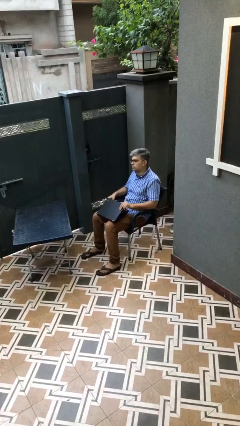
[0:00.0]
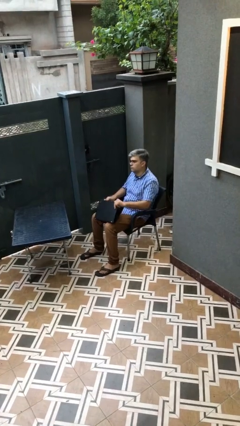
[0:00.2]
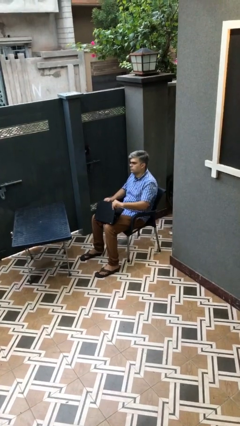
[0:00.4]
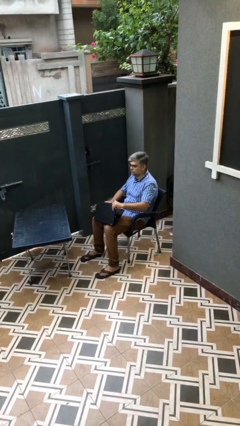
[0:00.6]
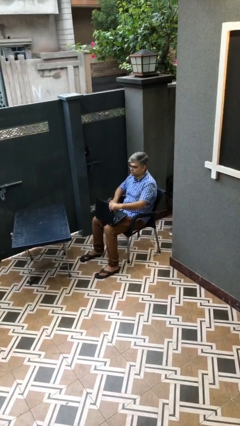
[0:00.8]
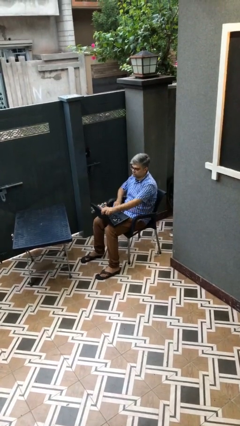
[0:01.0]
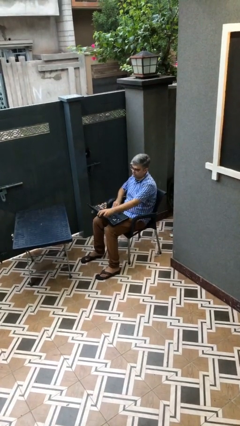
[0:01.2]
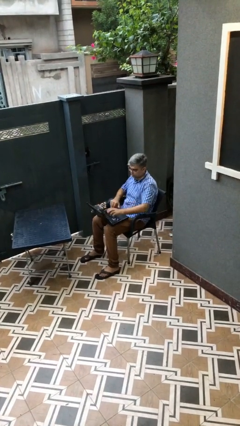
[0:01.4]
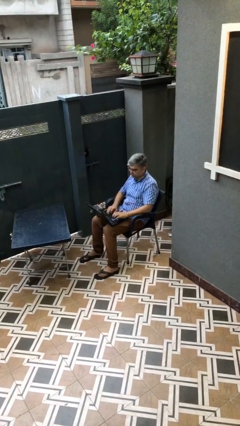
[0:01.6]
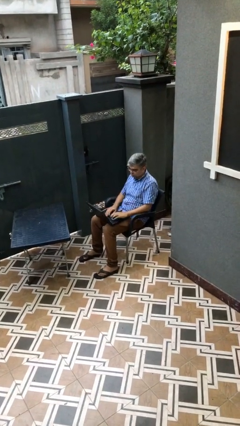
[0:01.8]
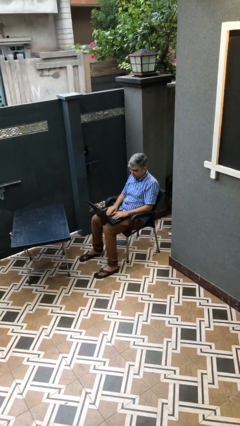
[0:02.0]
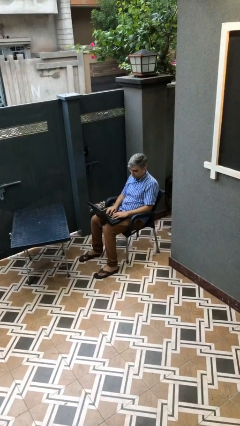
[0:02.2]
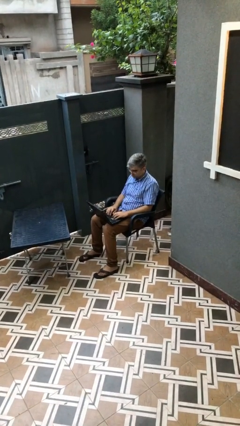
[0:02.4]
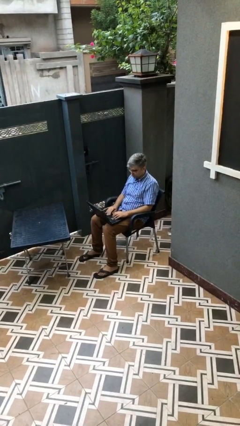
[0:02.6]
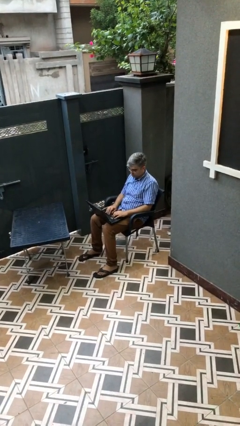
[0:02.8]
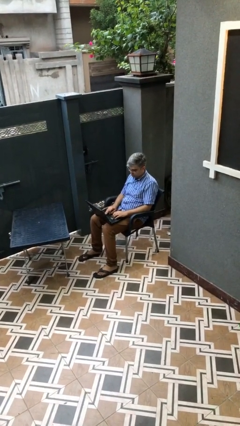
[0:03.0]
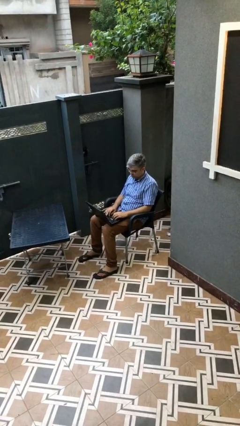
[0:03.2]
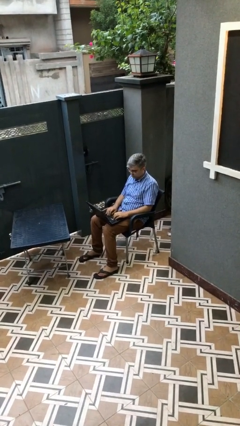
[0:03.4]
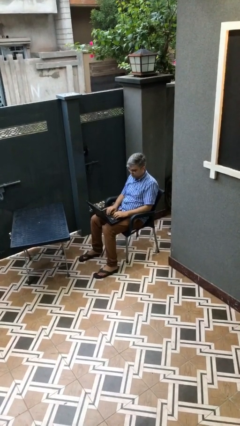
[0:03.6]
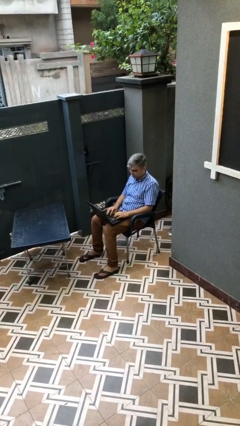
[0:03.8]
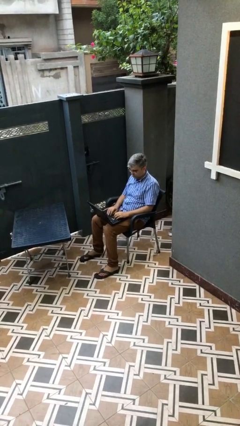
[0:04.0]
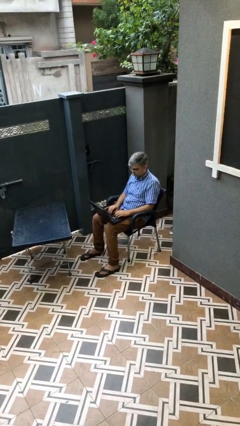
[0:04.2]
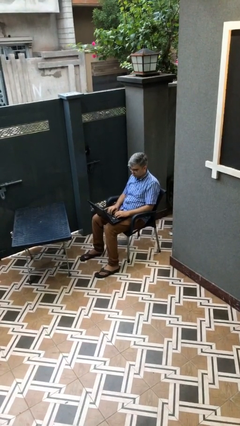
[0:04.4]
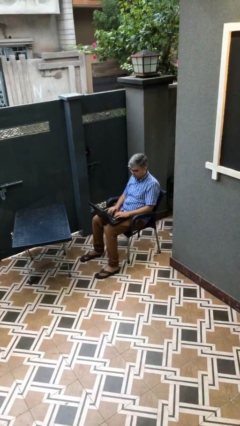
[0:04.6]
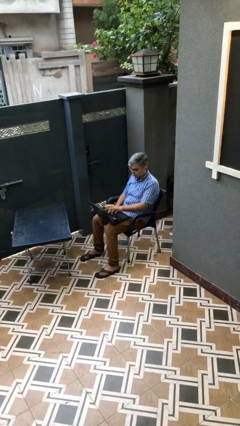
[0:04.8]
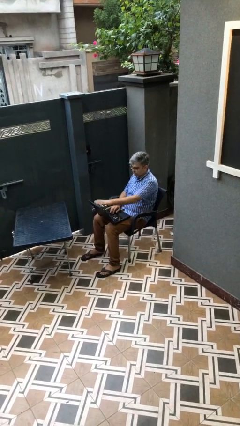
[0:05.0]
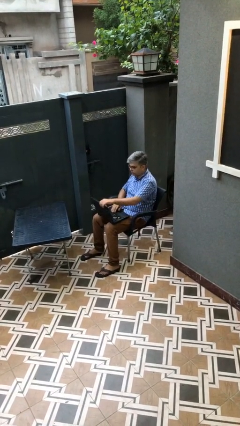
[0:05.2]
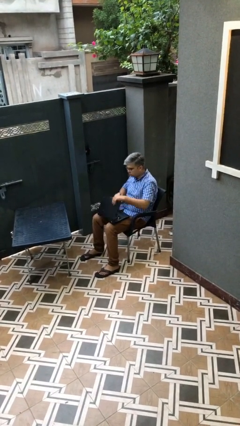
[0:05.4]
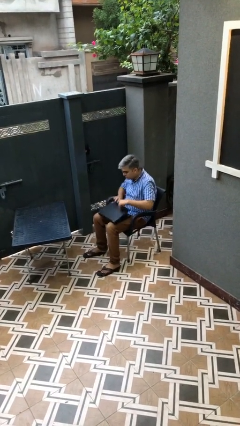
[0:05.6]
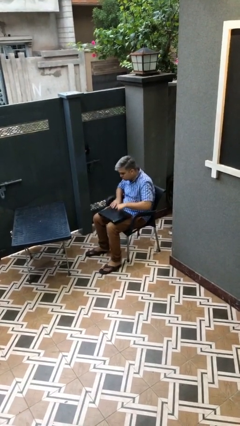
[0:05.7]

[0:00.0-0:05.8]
person interacts with laptop

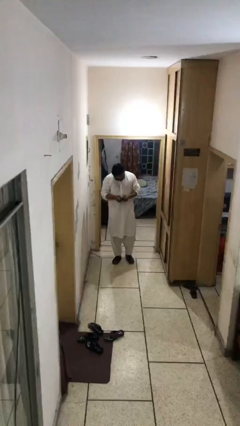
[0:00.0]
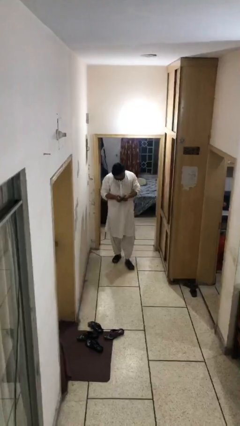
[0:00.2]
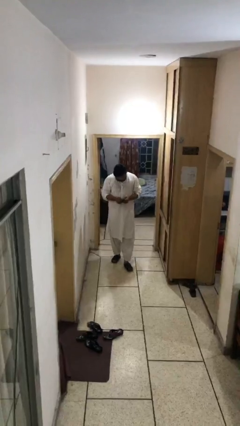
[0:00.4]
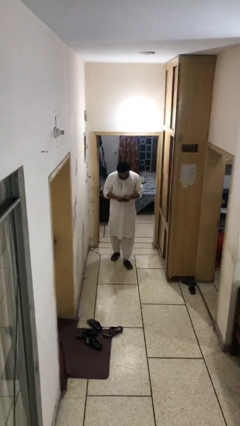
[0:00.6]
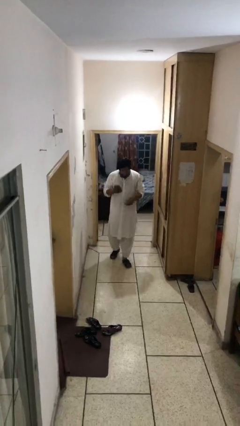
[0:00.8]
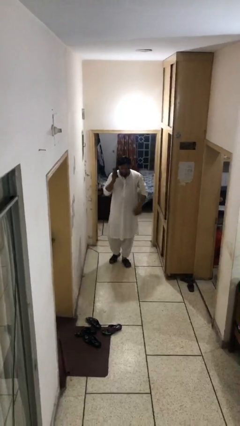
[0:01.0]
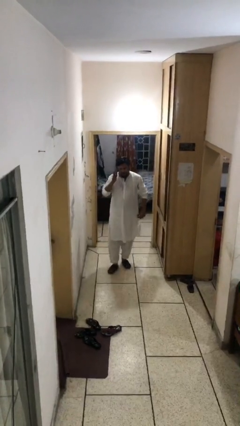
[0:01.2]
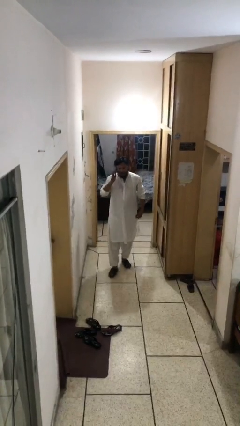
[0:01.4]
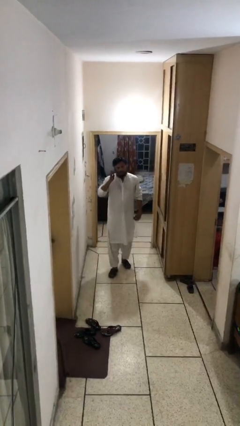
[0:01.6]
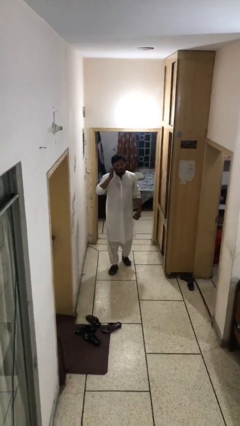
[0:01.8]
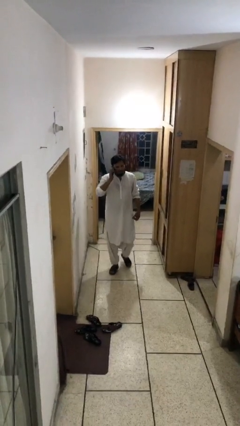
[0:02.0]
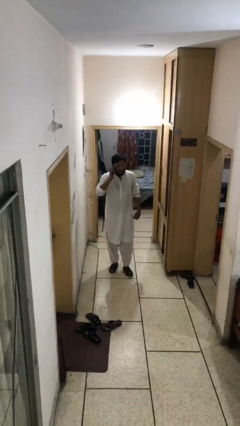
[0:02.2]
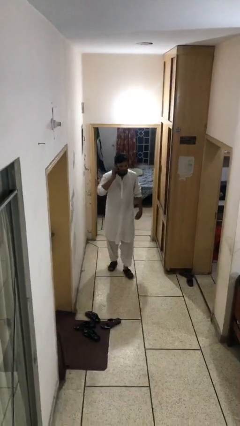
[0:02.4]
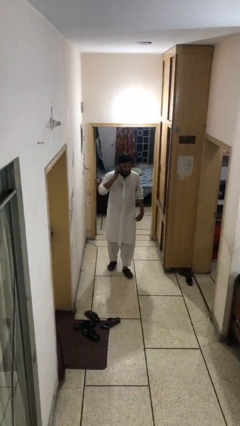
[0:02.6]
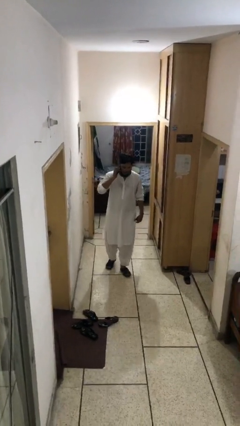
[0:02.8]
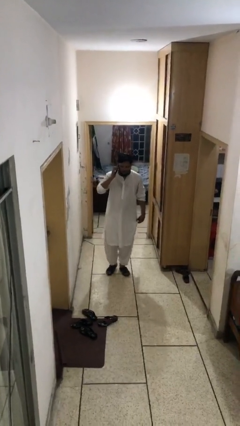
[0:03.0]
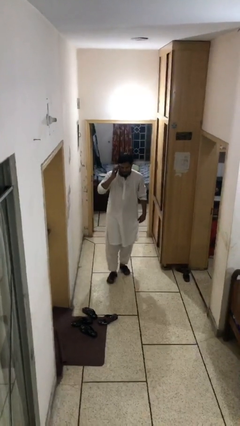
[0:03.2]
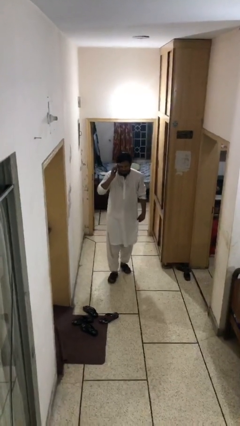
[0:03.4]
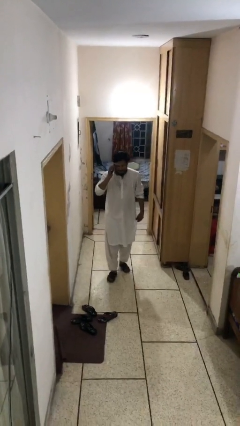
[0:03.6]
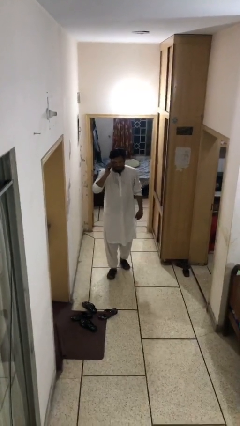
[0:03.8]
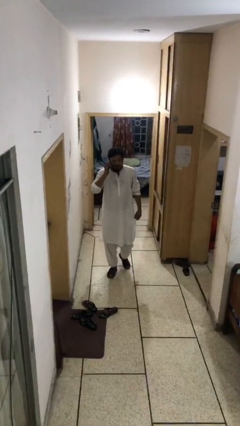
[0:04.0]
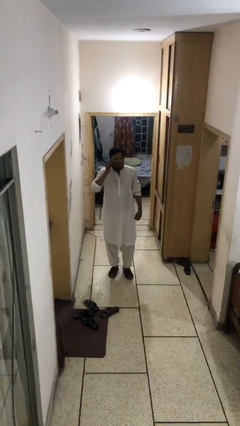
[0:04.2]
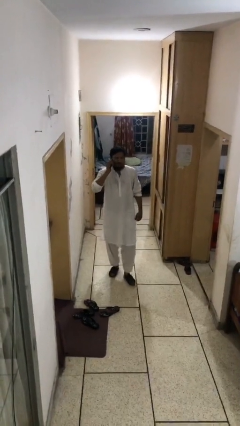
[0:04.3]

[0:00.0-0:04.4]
person talks on phone

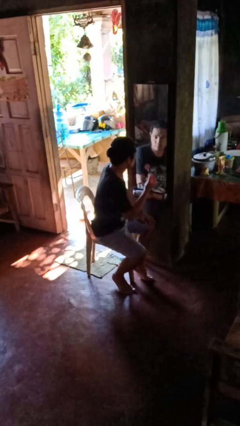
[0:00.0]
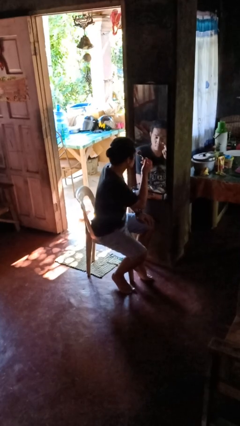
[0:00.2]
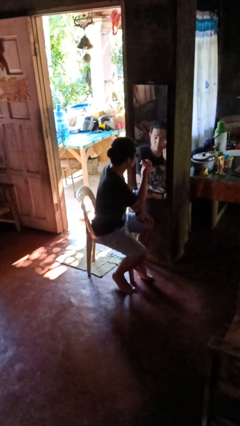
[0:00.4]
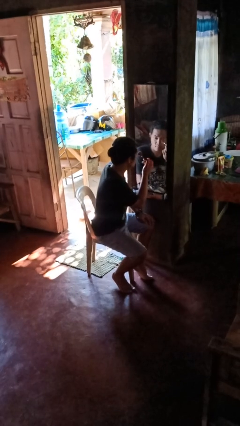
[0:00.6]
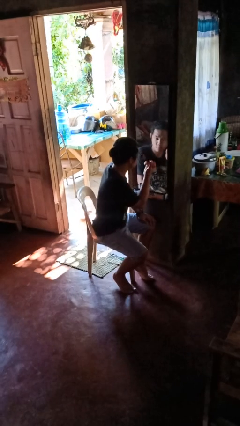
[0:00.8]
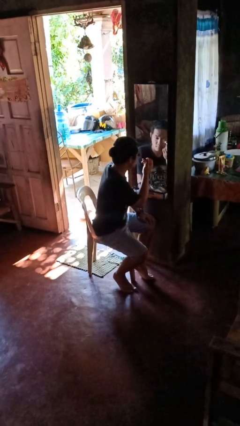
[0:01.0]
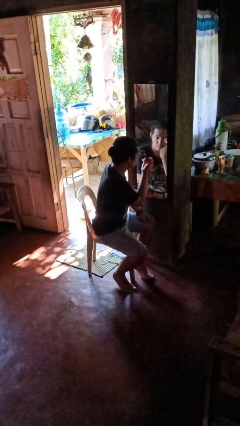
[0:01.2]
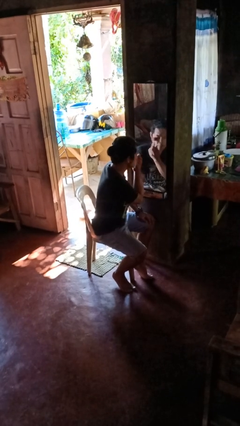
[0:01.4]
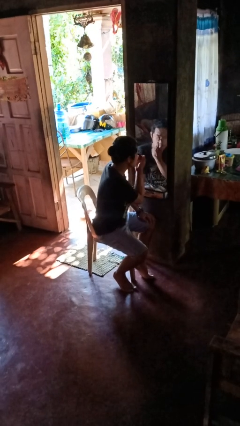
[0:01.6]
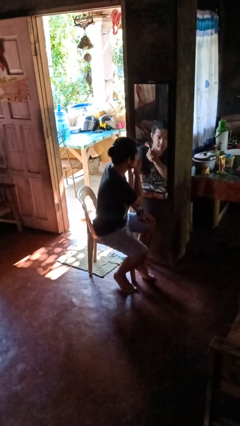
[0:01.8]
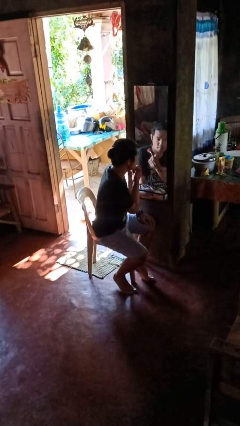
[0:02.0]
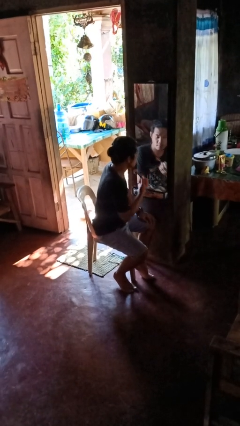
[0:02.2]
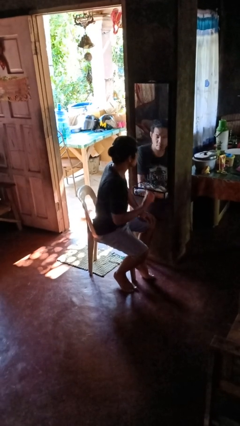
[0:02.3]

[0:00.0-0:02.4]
person applies eye makeup

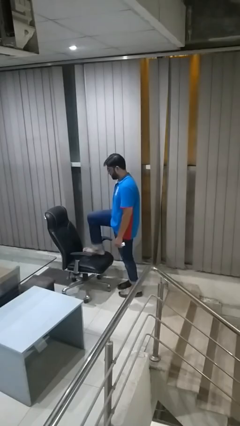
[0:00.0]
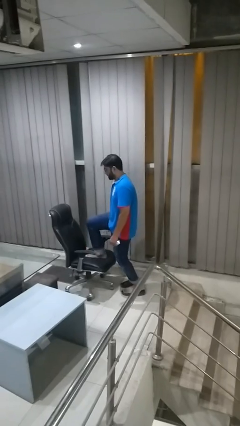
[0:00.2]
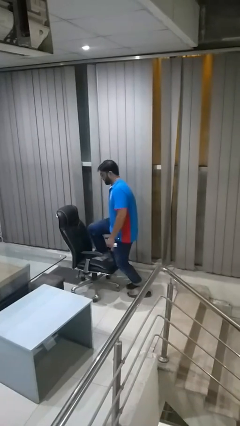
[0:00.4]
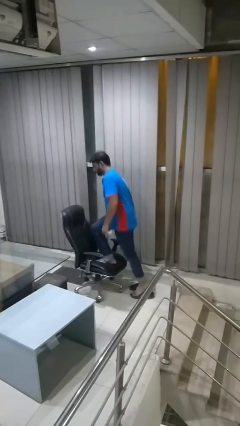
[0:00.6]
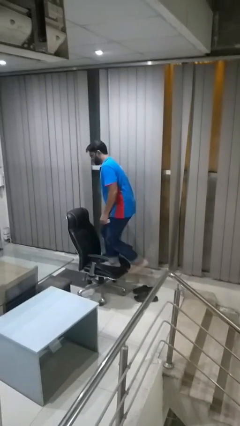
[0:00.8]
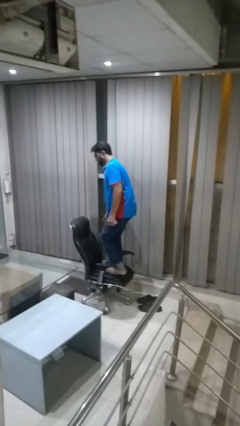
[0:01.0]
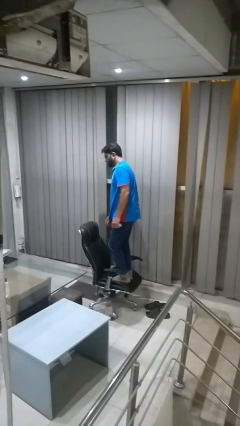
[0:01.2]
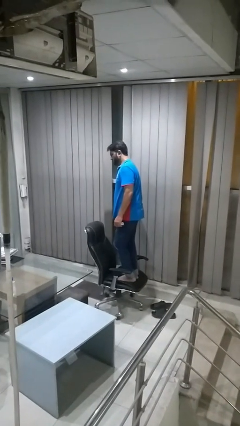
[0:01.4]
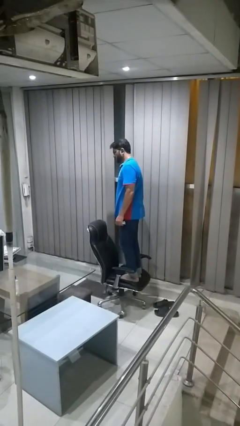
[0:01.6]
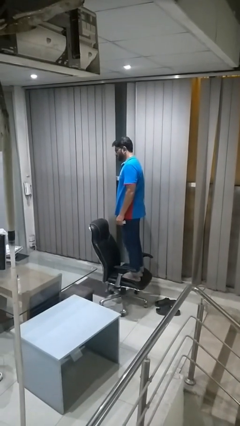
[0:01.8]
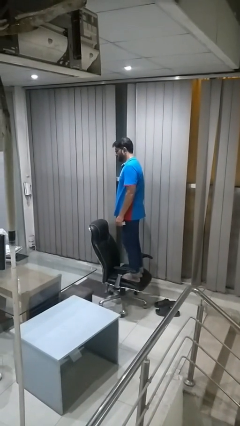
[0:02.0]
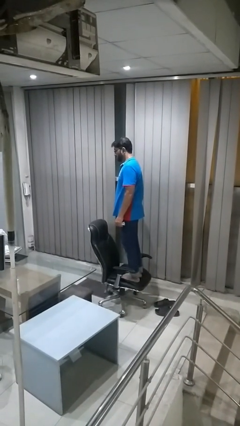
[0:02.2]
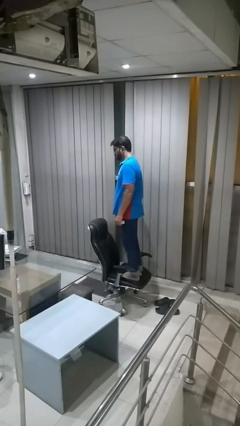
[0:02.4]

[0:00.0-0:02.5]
person climbs on chair

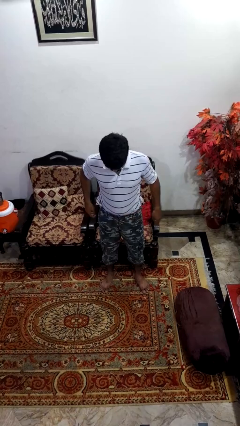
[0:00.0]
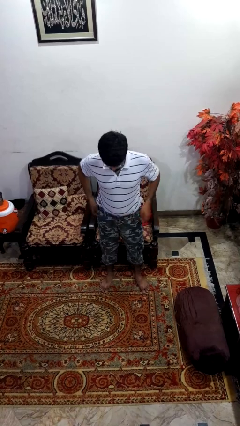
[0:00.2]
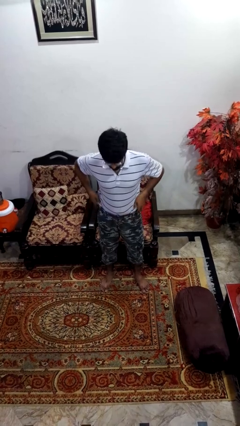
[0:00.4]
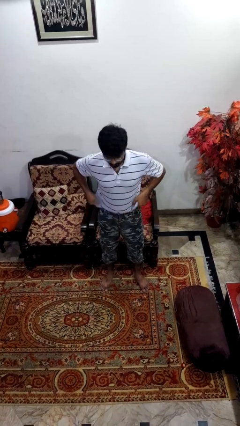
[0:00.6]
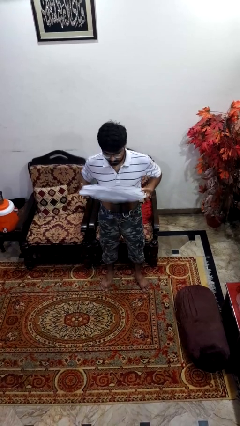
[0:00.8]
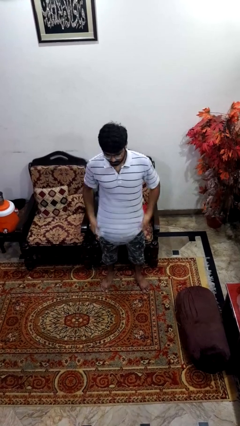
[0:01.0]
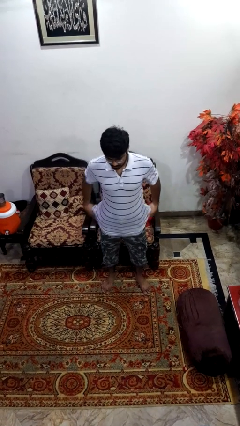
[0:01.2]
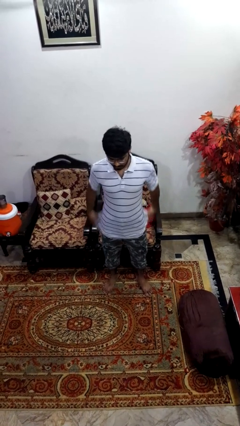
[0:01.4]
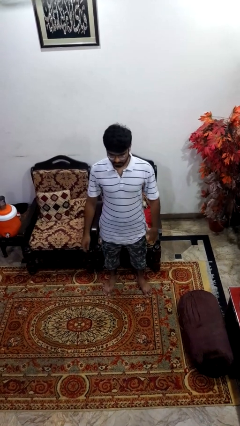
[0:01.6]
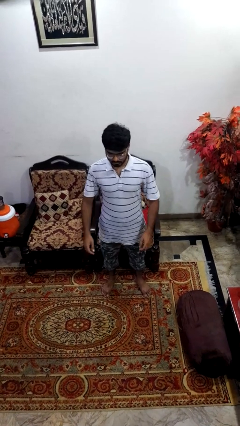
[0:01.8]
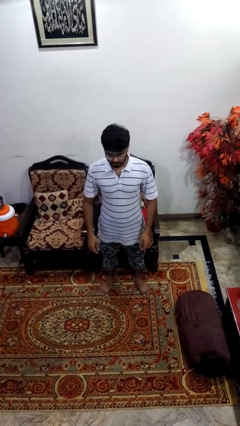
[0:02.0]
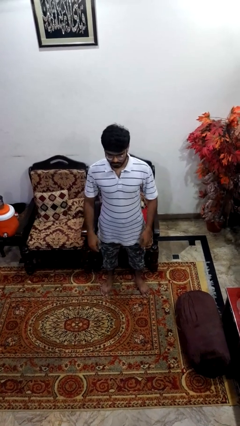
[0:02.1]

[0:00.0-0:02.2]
person untucks shirt

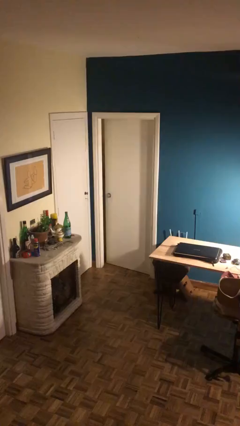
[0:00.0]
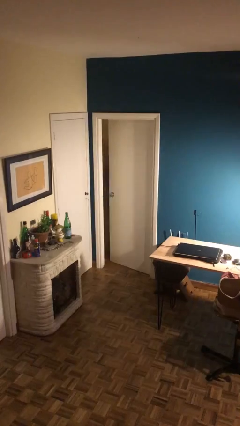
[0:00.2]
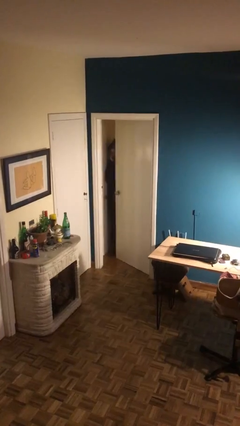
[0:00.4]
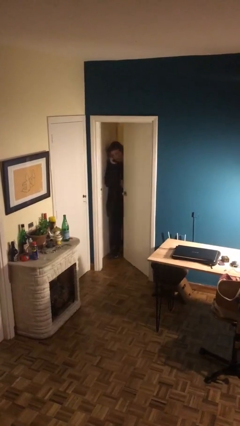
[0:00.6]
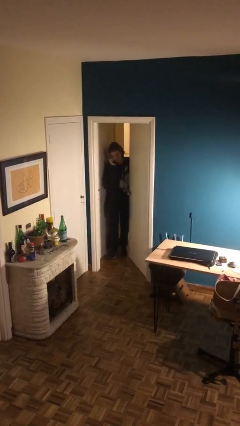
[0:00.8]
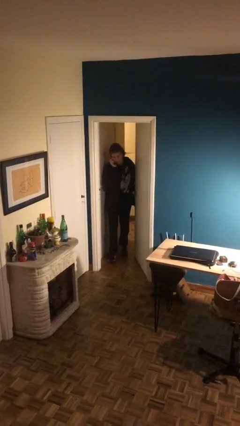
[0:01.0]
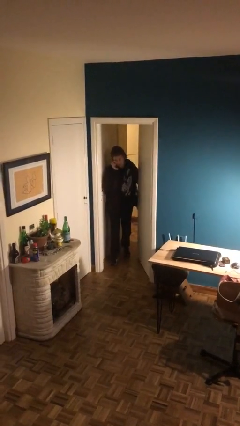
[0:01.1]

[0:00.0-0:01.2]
person opens facility door
